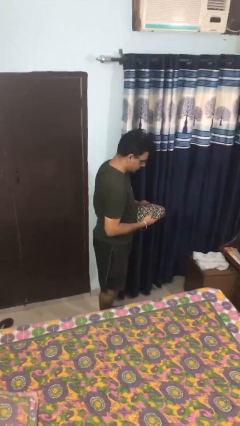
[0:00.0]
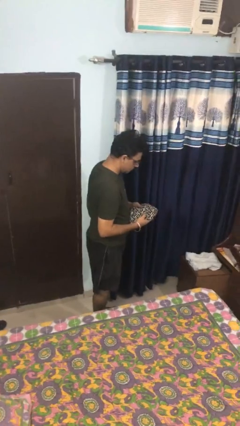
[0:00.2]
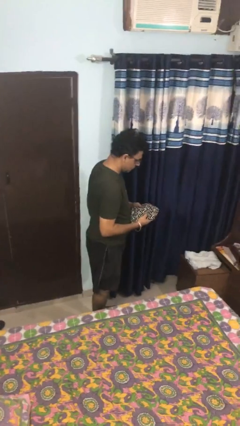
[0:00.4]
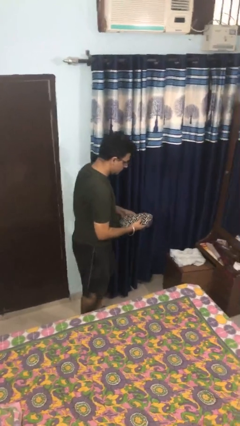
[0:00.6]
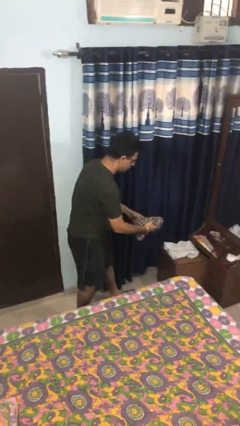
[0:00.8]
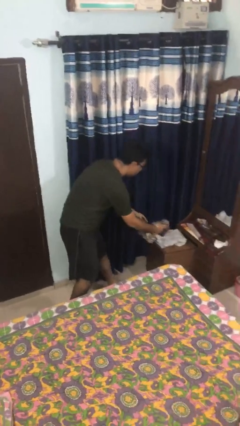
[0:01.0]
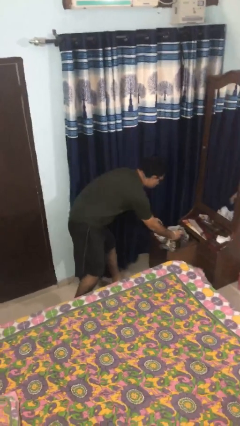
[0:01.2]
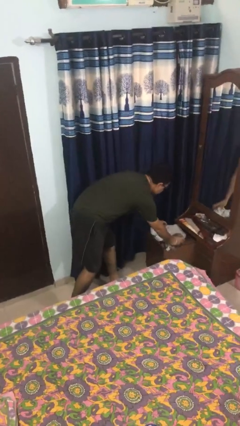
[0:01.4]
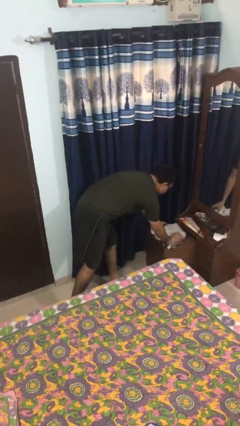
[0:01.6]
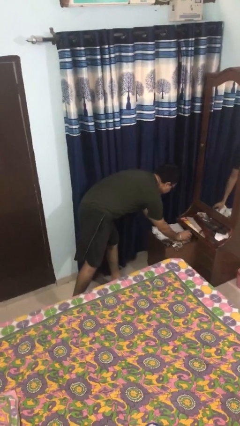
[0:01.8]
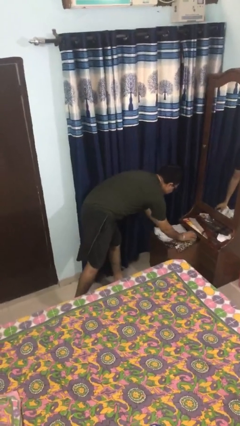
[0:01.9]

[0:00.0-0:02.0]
person puts clothes into dresser

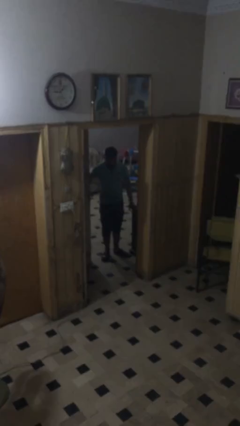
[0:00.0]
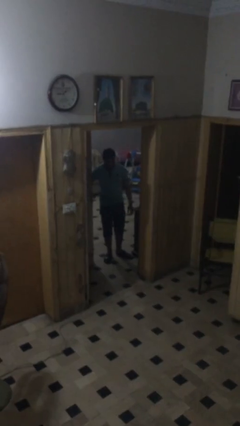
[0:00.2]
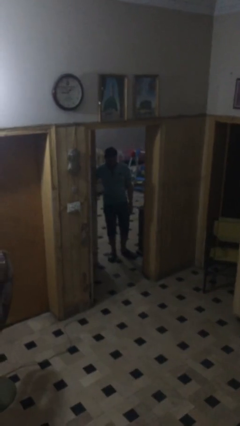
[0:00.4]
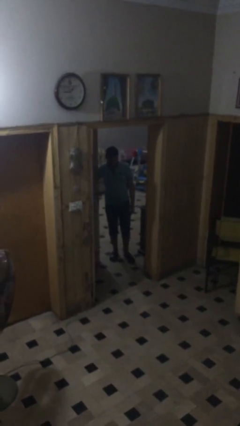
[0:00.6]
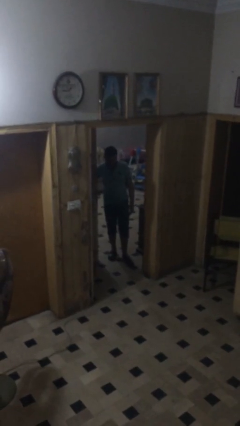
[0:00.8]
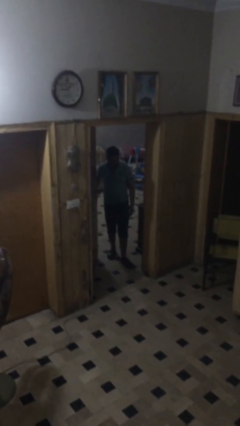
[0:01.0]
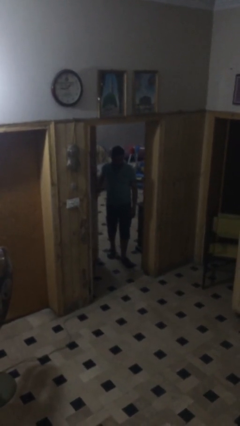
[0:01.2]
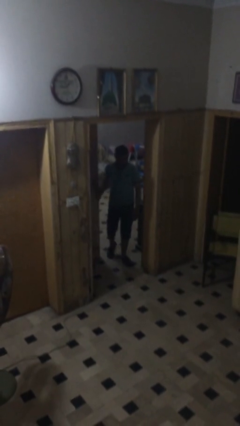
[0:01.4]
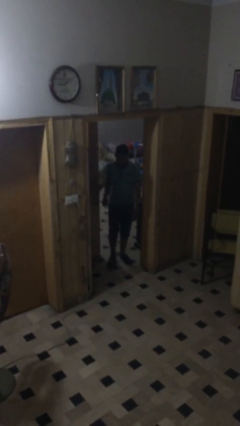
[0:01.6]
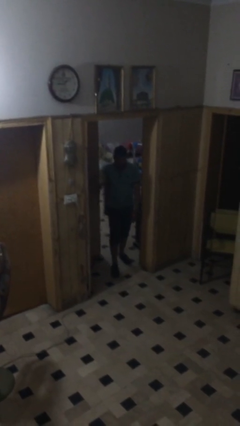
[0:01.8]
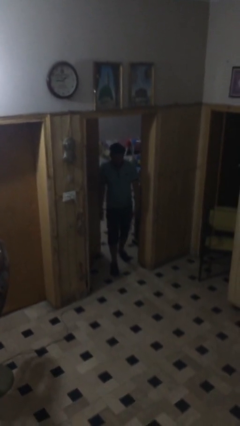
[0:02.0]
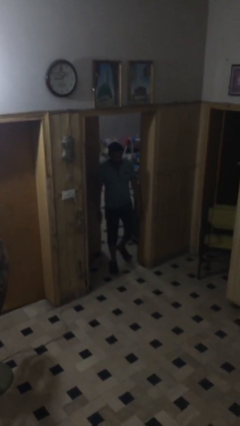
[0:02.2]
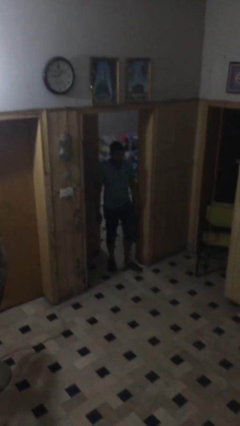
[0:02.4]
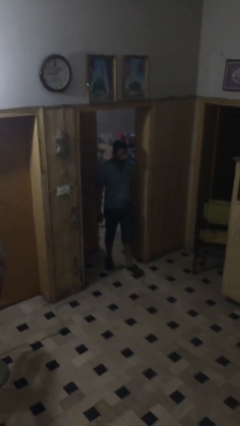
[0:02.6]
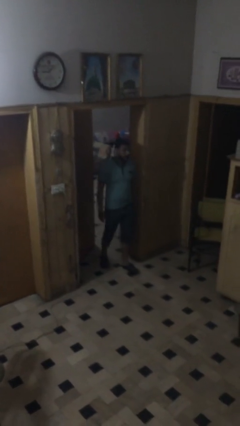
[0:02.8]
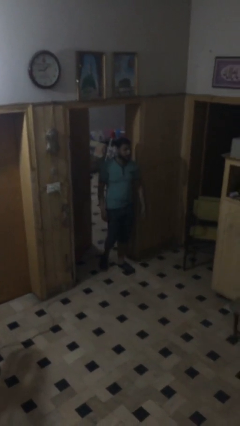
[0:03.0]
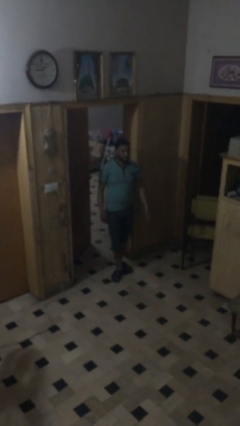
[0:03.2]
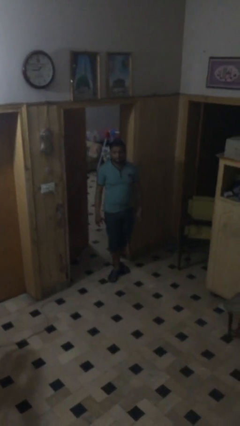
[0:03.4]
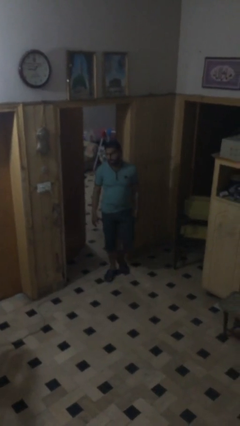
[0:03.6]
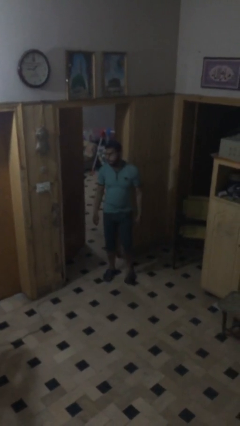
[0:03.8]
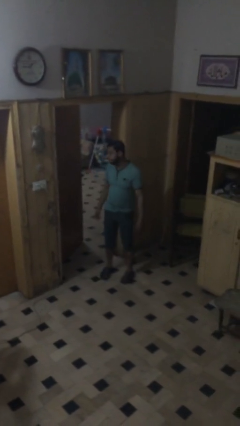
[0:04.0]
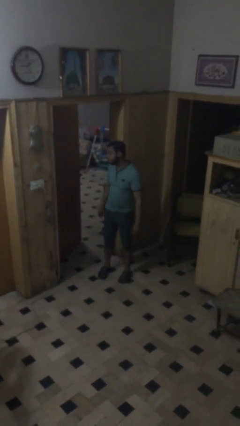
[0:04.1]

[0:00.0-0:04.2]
person enters scene through structure

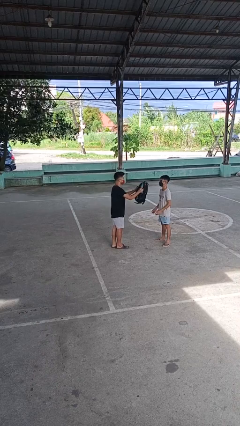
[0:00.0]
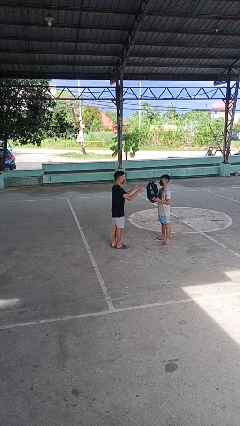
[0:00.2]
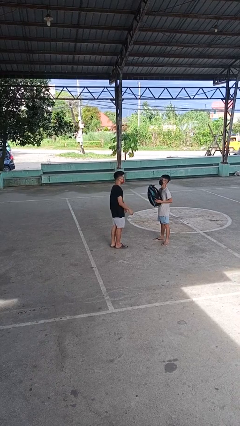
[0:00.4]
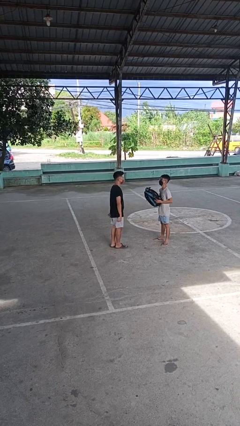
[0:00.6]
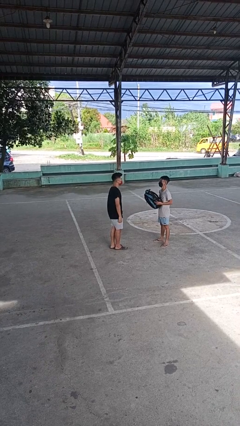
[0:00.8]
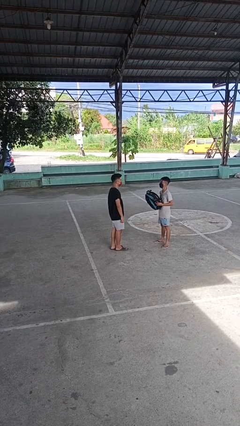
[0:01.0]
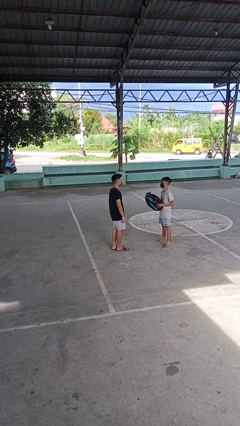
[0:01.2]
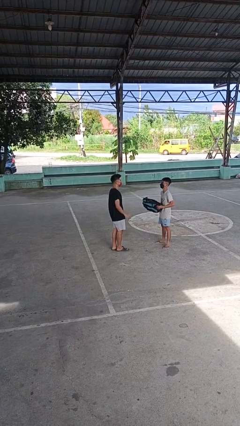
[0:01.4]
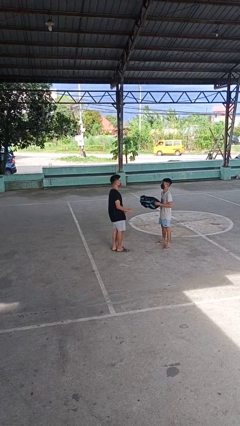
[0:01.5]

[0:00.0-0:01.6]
person throws object to person

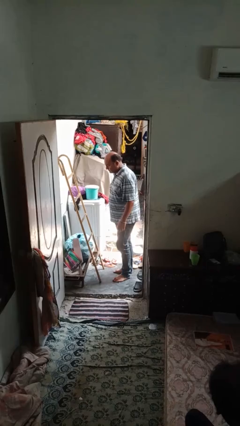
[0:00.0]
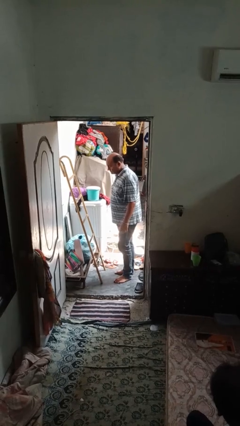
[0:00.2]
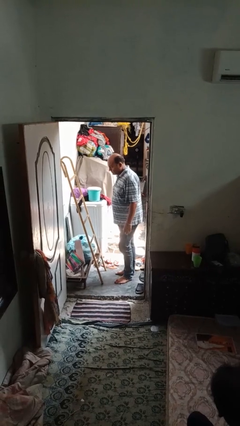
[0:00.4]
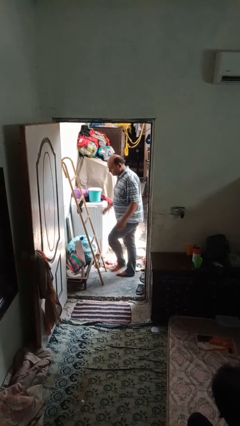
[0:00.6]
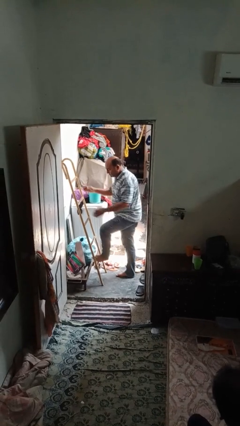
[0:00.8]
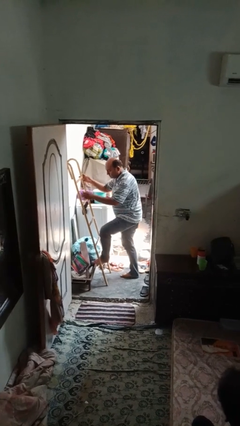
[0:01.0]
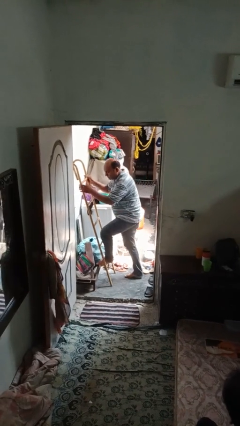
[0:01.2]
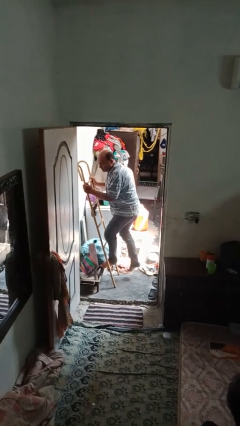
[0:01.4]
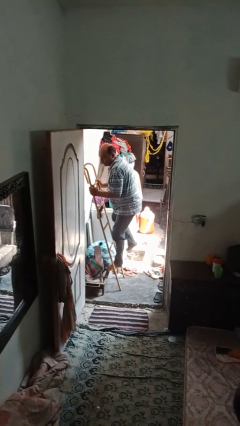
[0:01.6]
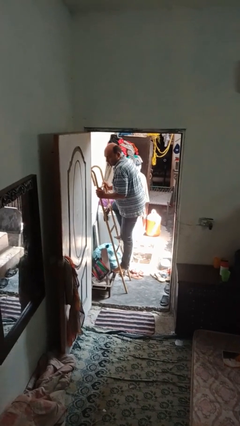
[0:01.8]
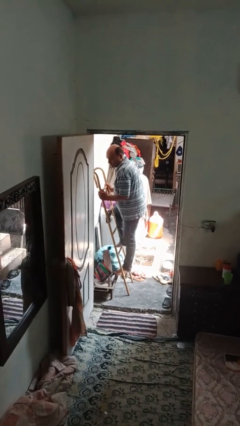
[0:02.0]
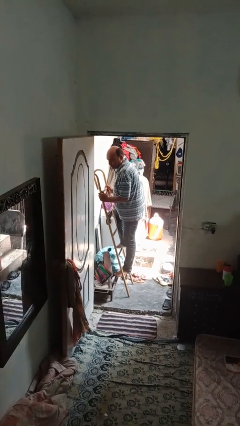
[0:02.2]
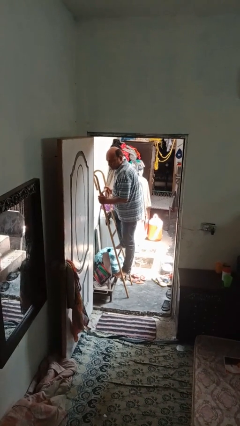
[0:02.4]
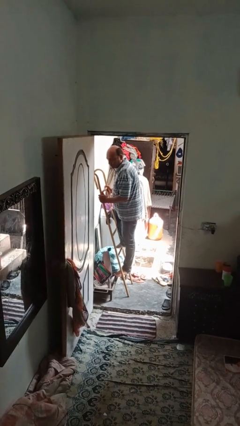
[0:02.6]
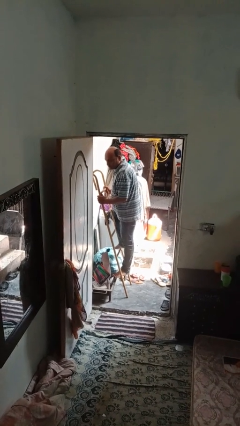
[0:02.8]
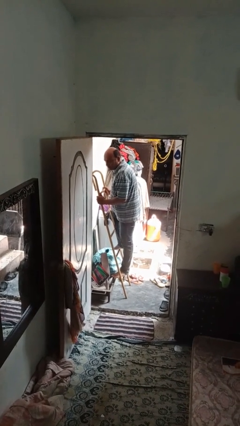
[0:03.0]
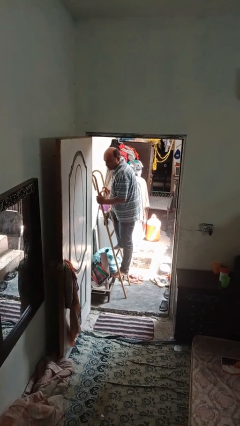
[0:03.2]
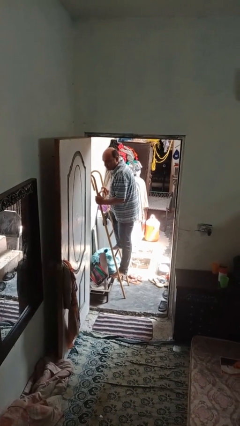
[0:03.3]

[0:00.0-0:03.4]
person climbs up ladder

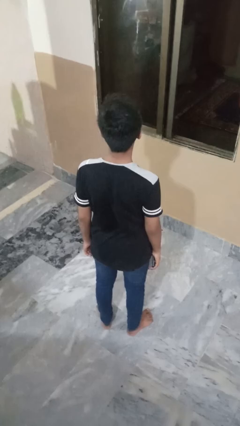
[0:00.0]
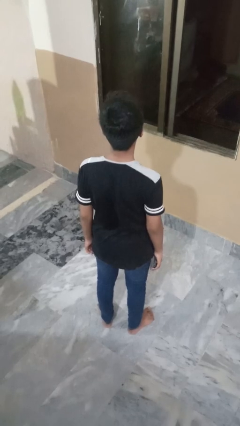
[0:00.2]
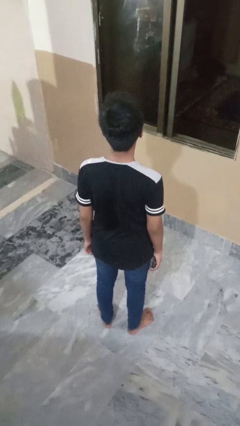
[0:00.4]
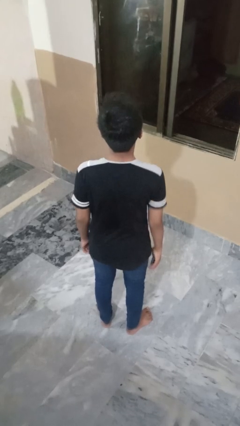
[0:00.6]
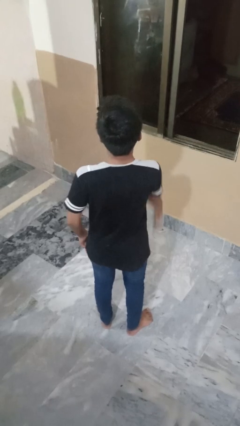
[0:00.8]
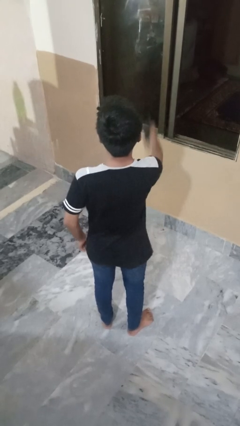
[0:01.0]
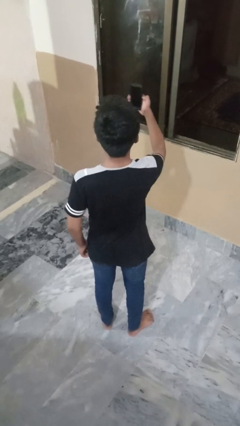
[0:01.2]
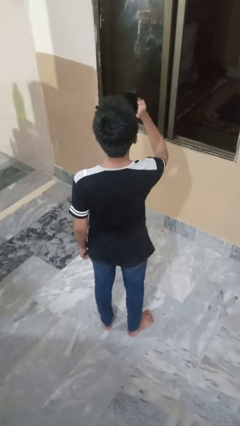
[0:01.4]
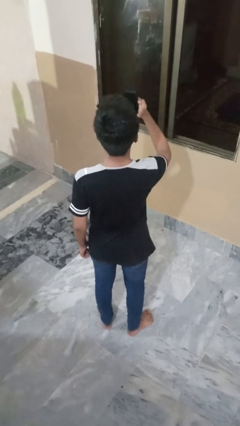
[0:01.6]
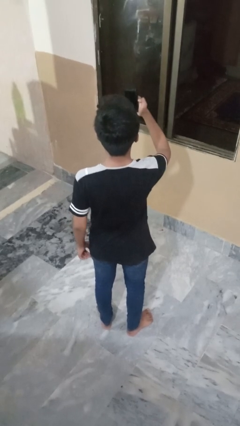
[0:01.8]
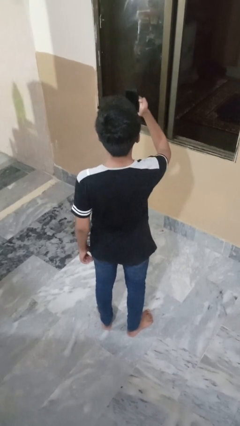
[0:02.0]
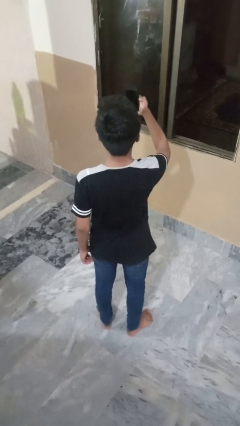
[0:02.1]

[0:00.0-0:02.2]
person takes selfie

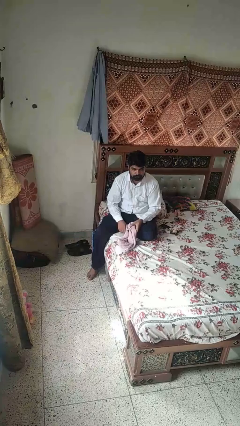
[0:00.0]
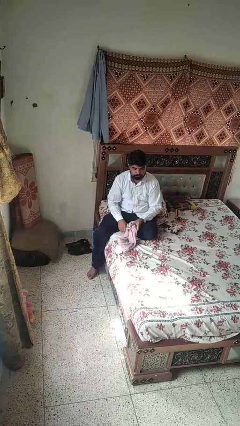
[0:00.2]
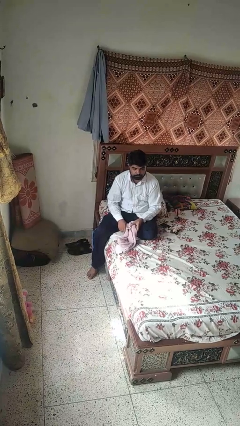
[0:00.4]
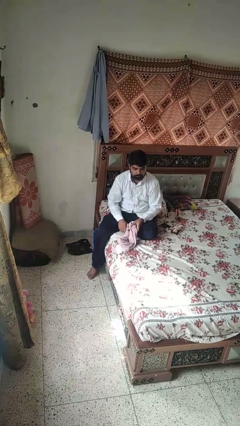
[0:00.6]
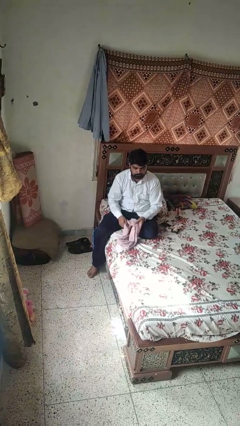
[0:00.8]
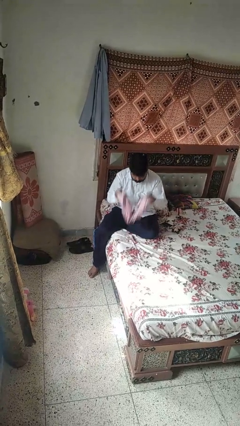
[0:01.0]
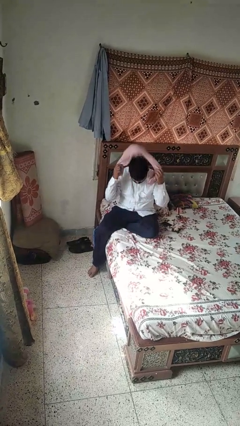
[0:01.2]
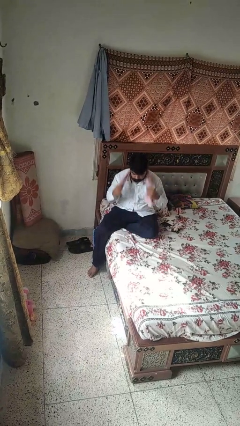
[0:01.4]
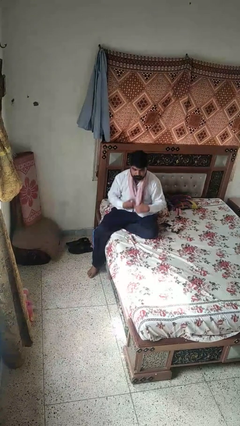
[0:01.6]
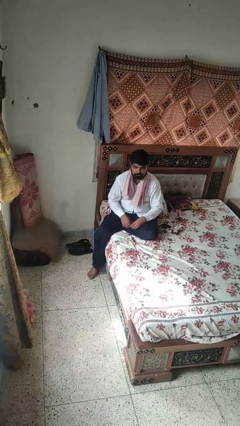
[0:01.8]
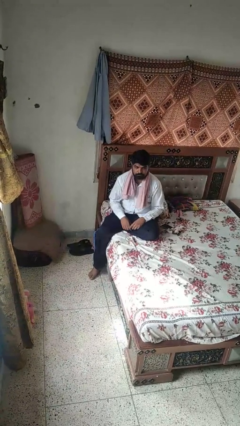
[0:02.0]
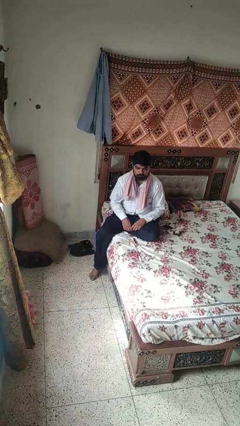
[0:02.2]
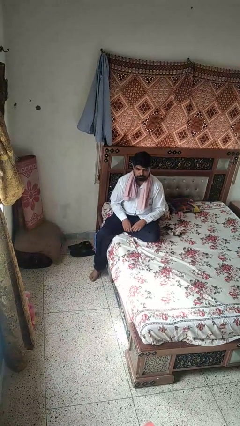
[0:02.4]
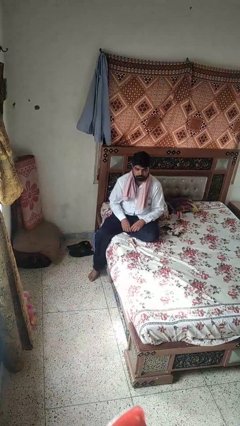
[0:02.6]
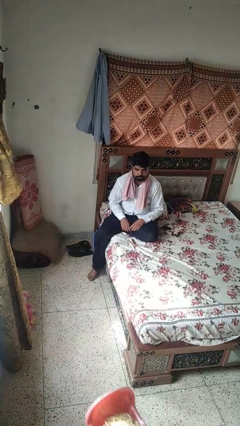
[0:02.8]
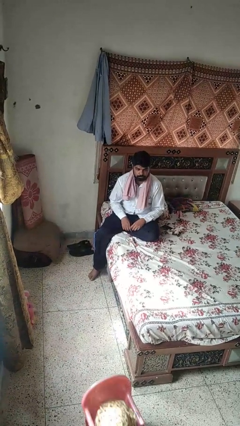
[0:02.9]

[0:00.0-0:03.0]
person puts on scarf

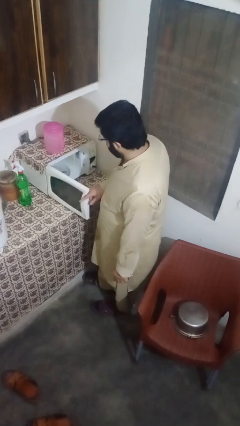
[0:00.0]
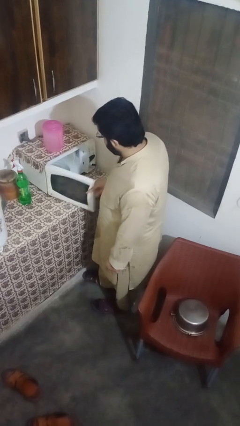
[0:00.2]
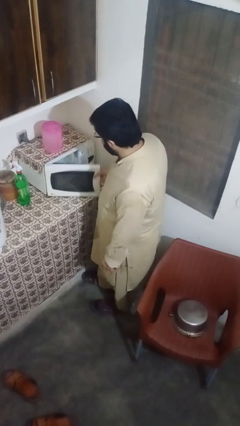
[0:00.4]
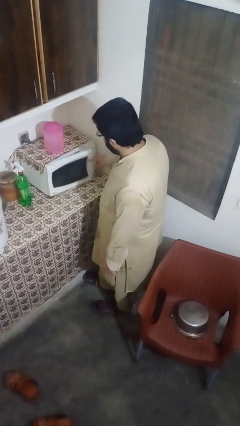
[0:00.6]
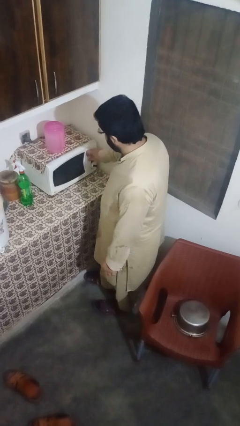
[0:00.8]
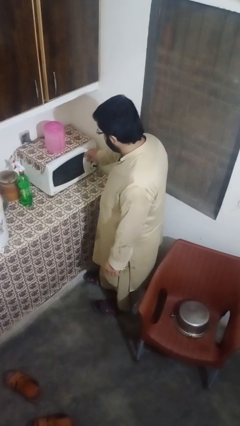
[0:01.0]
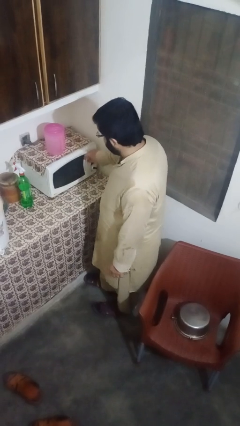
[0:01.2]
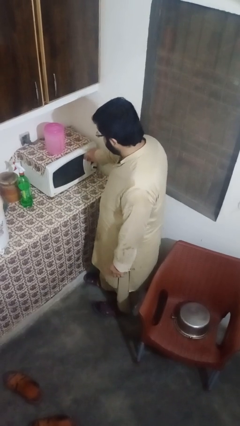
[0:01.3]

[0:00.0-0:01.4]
person closes microwave
